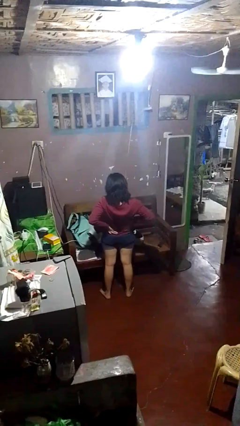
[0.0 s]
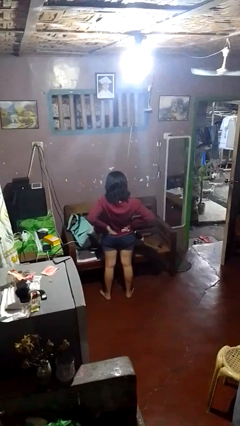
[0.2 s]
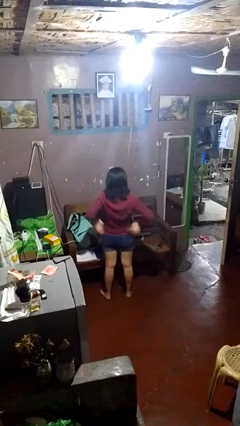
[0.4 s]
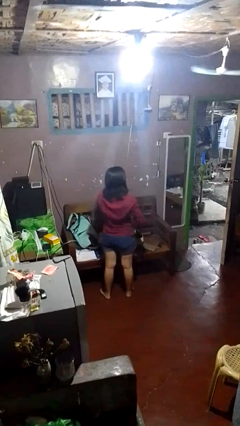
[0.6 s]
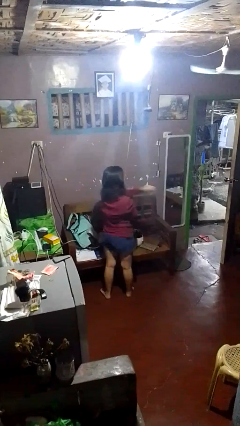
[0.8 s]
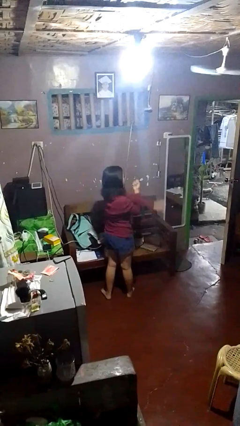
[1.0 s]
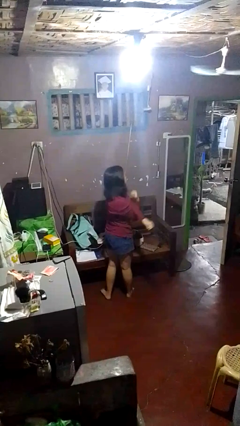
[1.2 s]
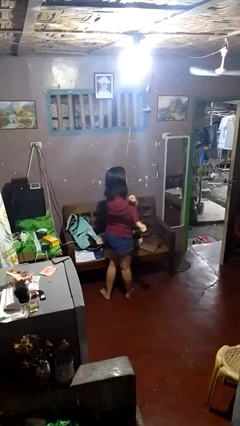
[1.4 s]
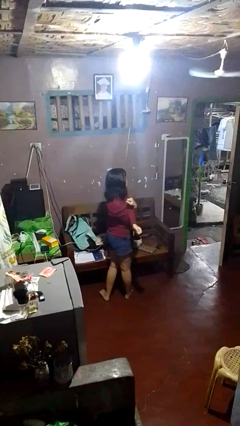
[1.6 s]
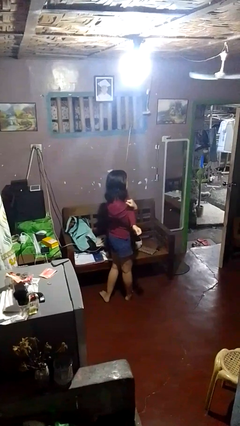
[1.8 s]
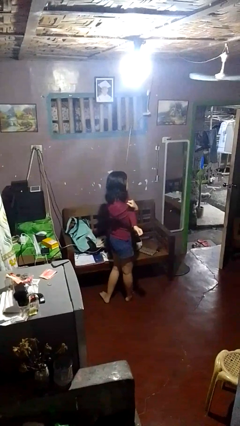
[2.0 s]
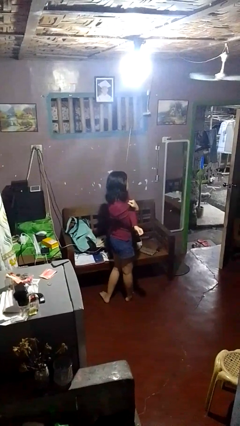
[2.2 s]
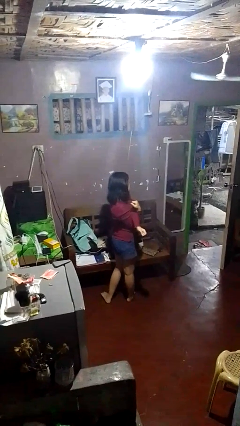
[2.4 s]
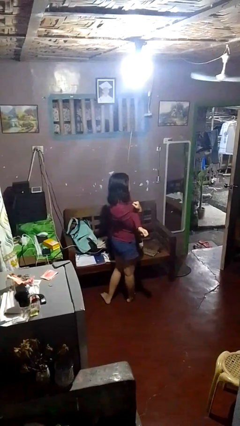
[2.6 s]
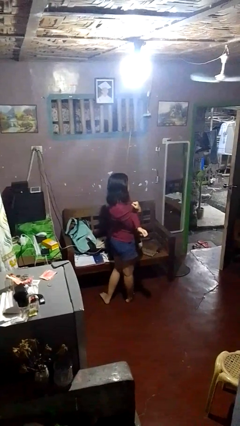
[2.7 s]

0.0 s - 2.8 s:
person stretches arms to side

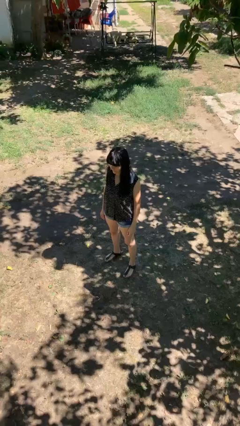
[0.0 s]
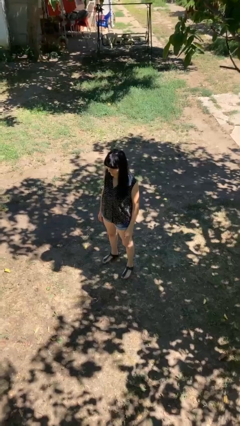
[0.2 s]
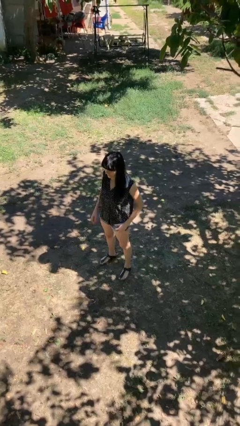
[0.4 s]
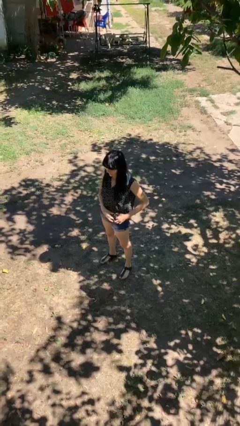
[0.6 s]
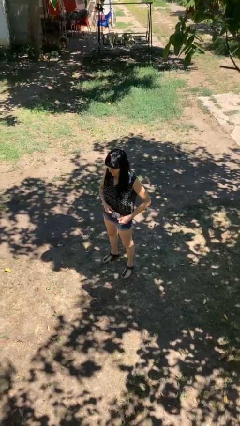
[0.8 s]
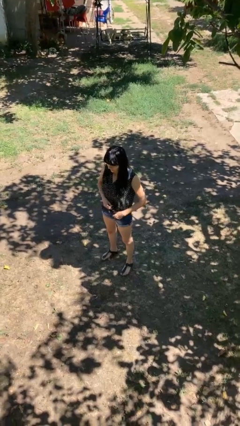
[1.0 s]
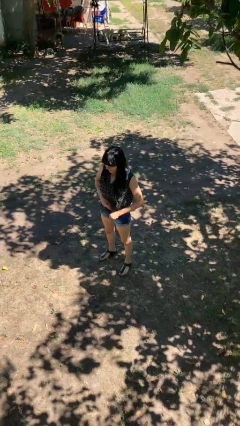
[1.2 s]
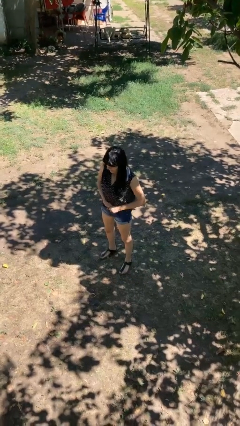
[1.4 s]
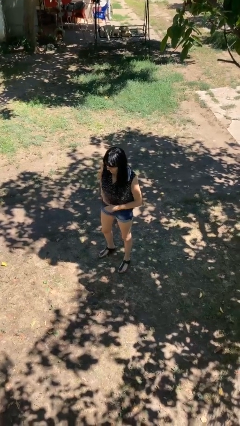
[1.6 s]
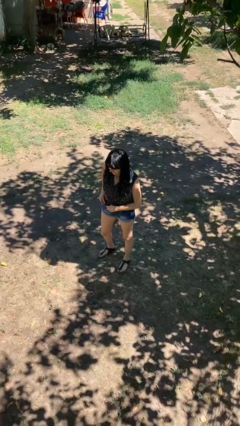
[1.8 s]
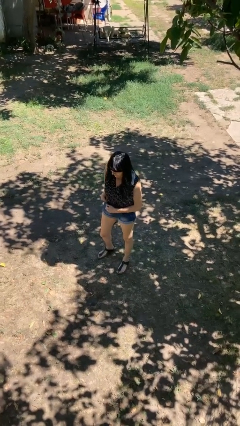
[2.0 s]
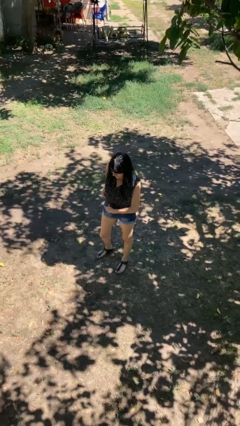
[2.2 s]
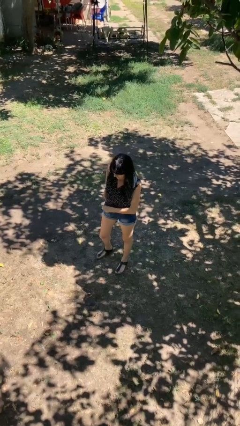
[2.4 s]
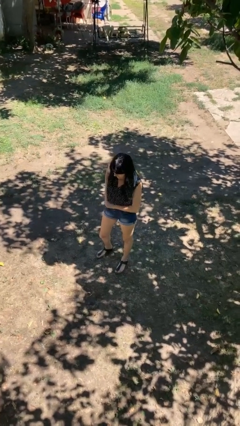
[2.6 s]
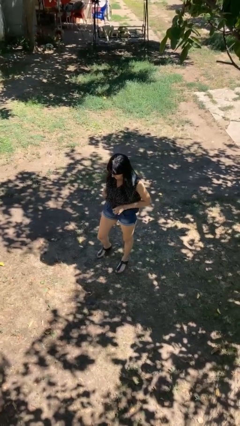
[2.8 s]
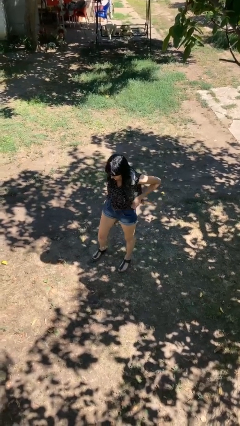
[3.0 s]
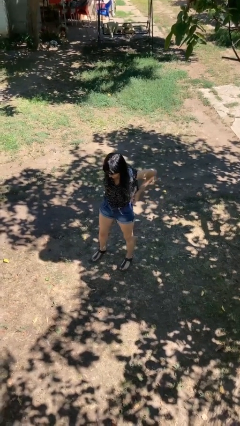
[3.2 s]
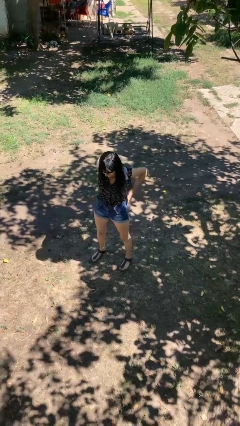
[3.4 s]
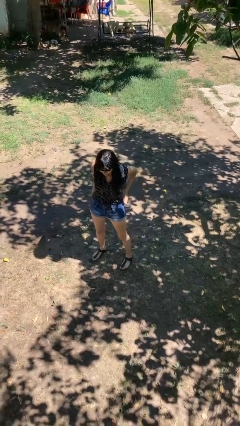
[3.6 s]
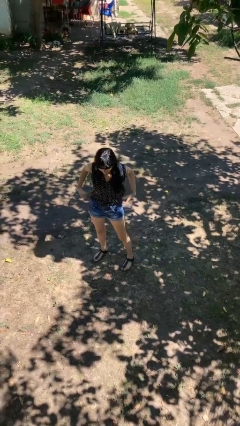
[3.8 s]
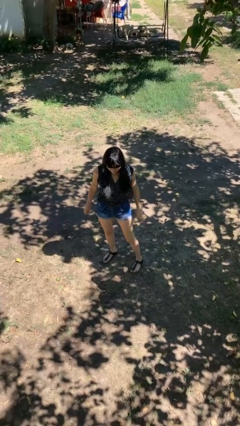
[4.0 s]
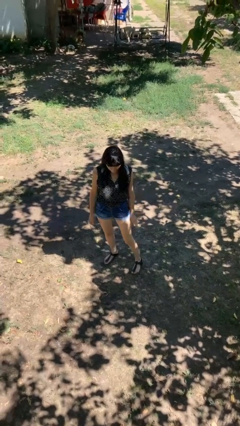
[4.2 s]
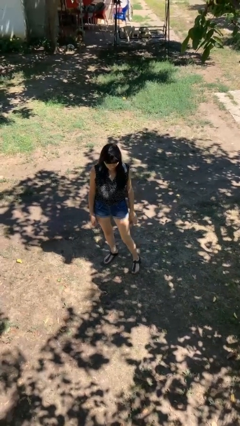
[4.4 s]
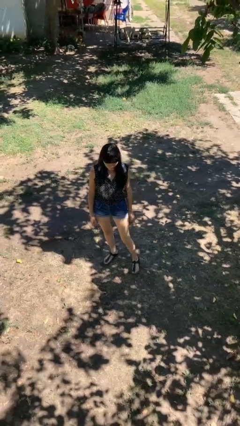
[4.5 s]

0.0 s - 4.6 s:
person tucks in shirt

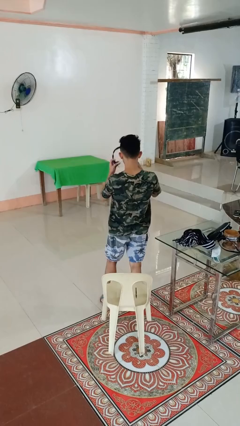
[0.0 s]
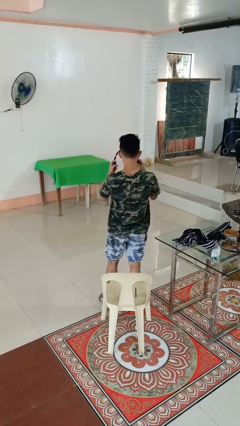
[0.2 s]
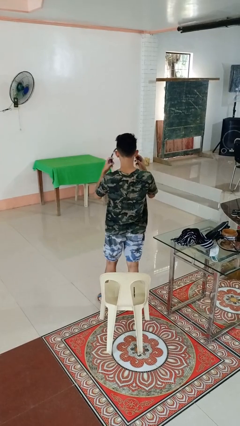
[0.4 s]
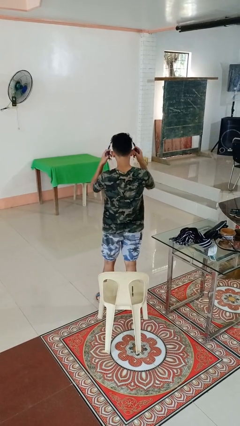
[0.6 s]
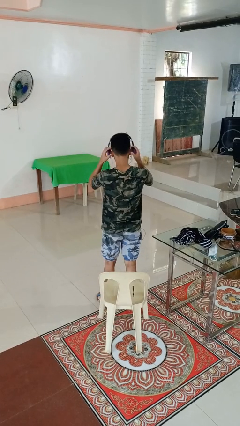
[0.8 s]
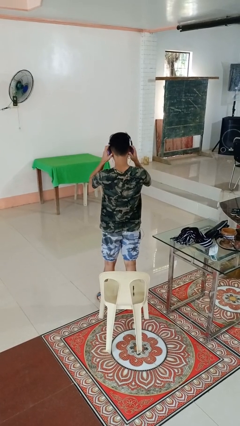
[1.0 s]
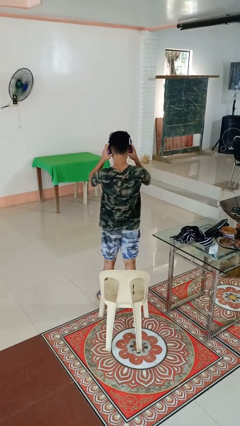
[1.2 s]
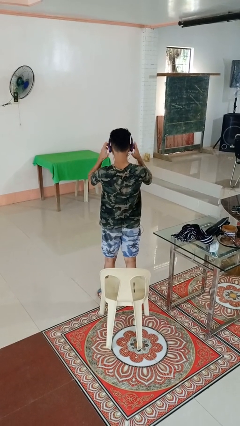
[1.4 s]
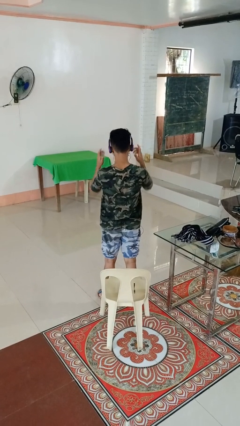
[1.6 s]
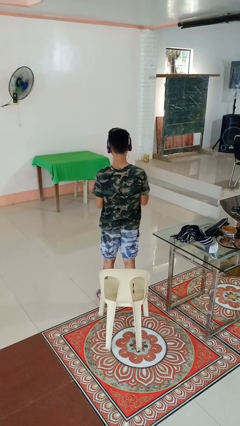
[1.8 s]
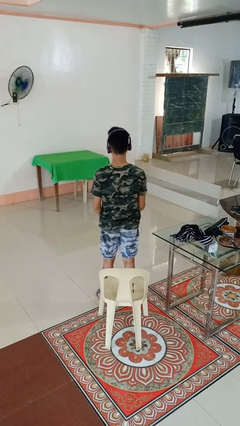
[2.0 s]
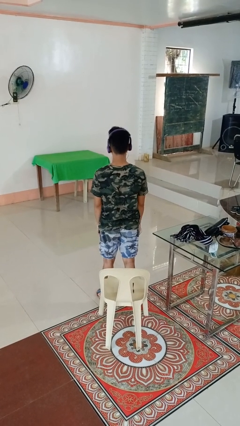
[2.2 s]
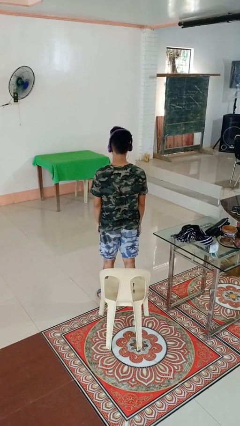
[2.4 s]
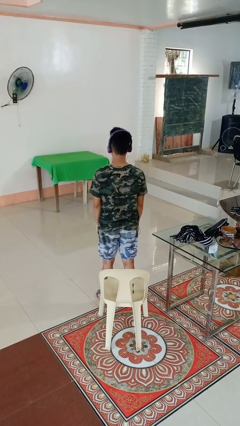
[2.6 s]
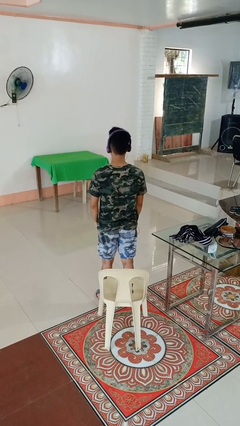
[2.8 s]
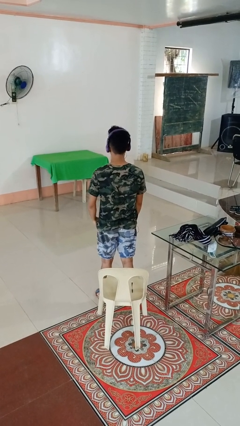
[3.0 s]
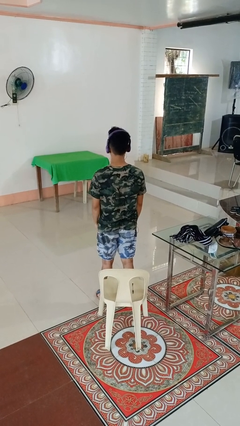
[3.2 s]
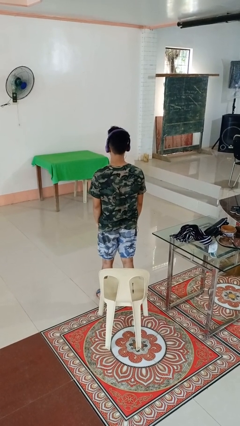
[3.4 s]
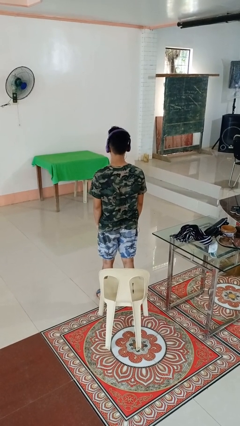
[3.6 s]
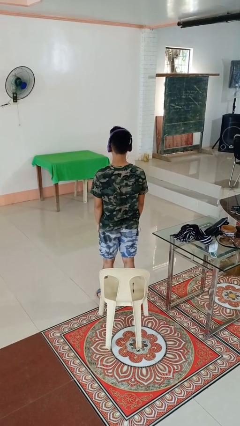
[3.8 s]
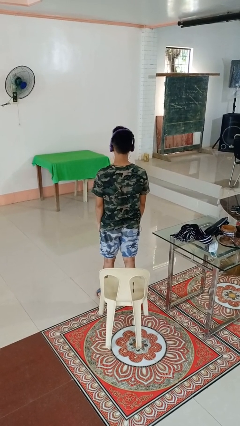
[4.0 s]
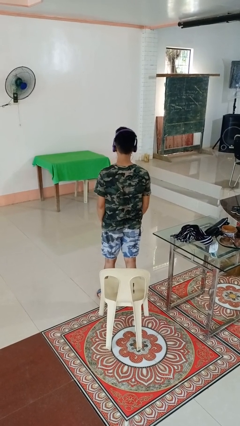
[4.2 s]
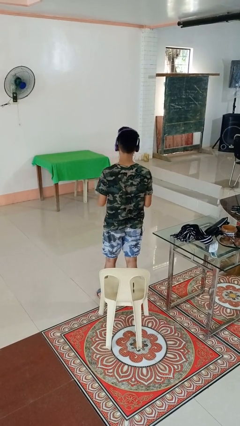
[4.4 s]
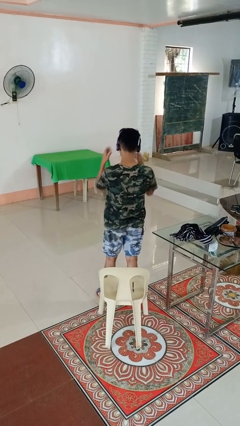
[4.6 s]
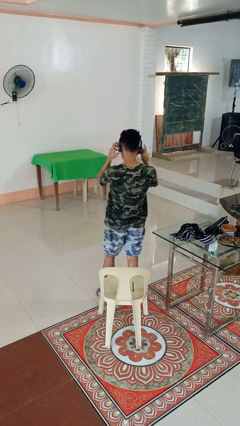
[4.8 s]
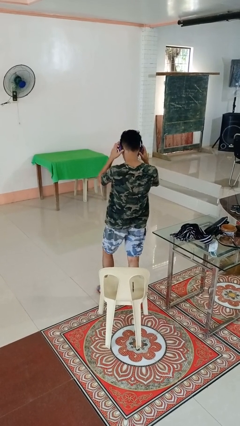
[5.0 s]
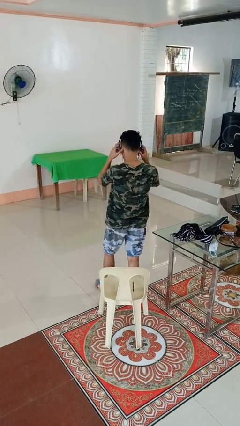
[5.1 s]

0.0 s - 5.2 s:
person puts on headphones

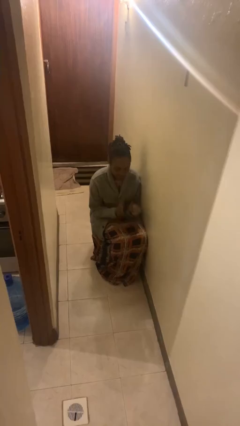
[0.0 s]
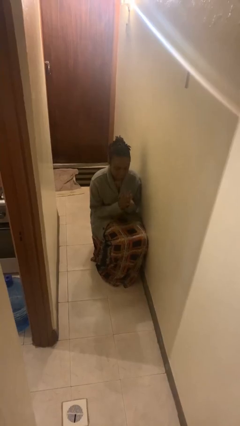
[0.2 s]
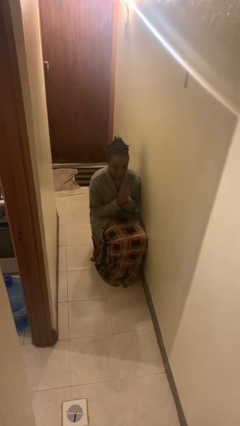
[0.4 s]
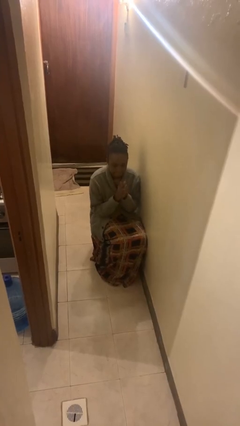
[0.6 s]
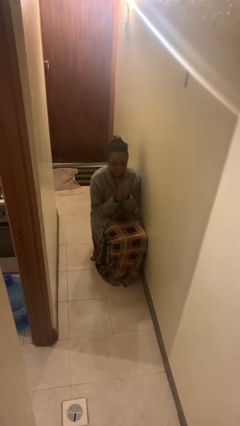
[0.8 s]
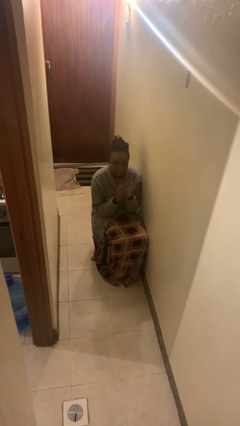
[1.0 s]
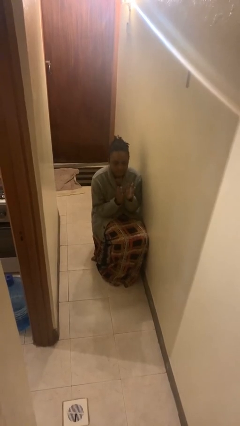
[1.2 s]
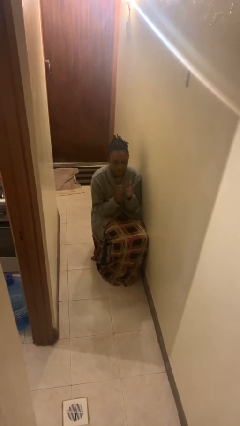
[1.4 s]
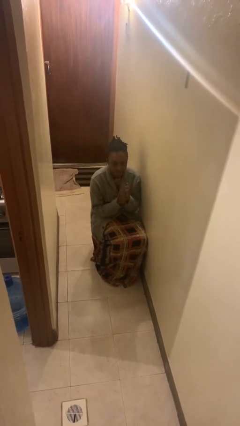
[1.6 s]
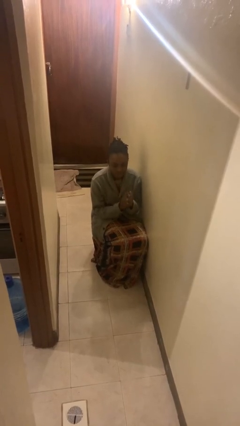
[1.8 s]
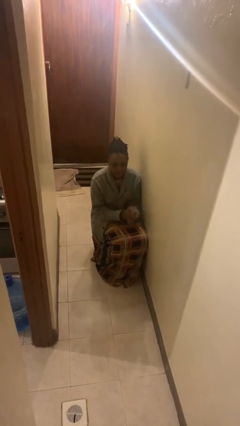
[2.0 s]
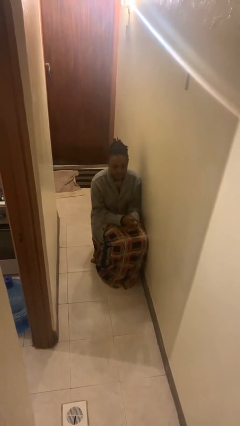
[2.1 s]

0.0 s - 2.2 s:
person claps hands

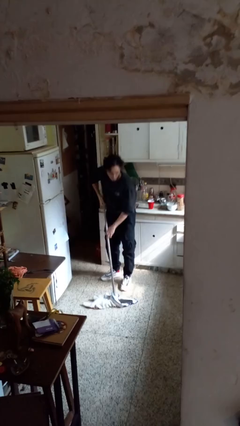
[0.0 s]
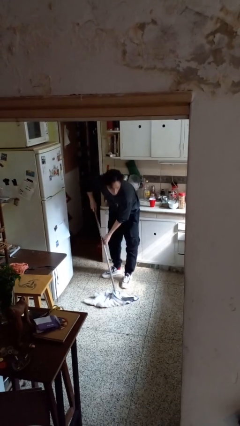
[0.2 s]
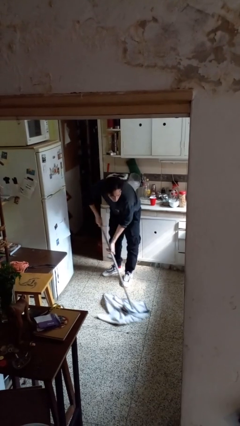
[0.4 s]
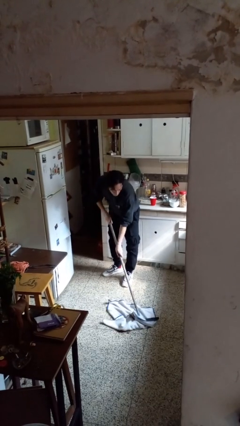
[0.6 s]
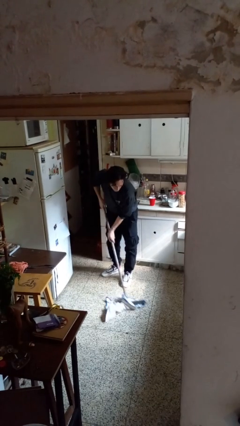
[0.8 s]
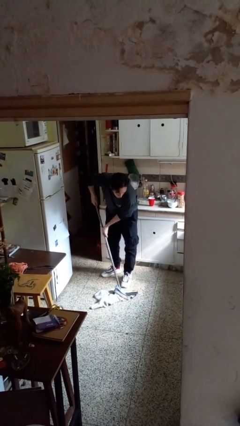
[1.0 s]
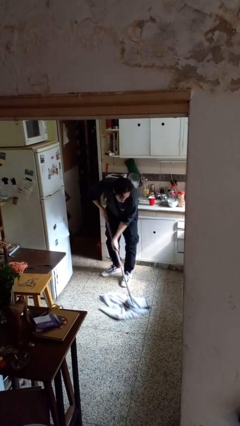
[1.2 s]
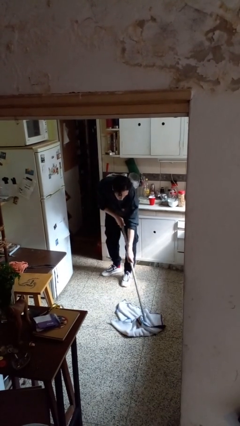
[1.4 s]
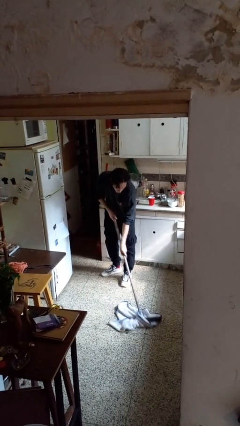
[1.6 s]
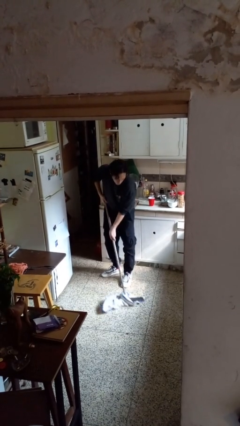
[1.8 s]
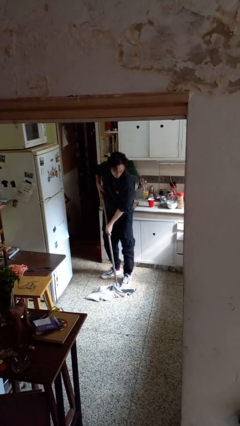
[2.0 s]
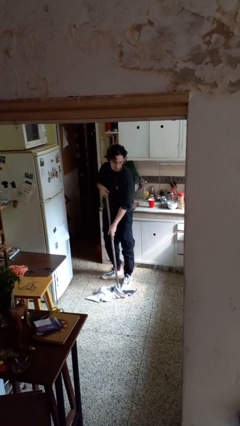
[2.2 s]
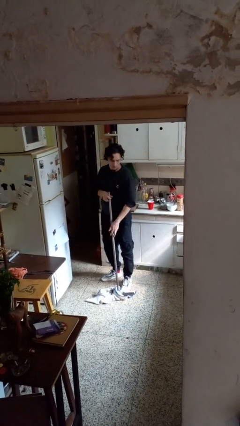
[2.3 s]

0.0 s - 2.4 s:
person mops

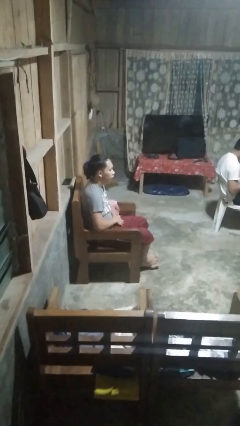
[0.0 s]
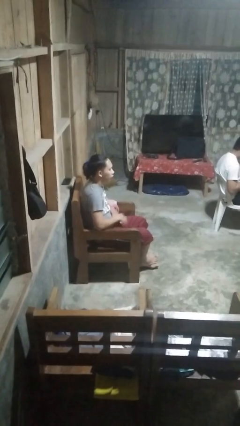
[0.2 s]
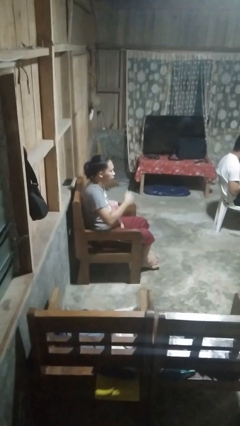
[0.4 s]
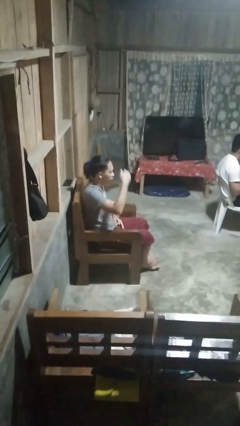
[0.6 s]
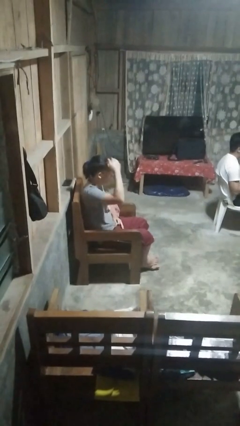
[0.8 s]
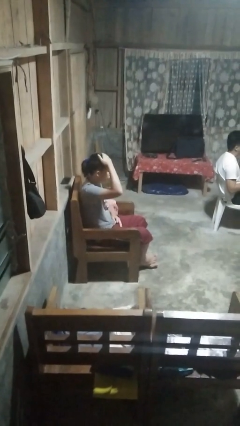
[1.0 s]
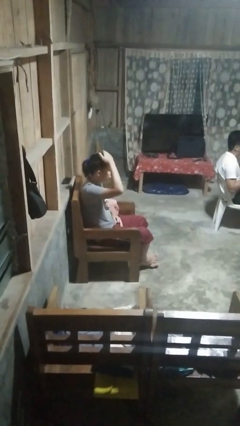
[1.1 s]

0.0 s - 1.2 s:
person pats head
